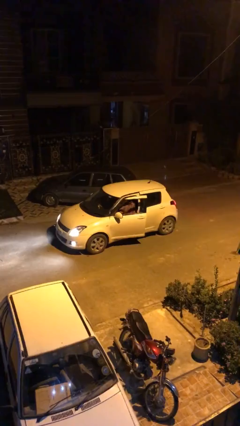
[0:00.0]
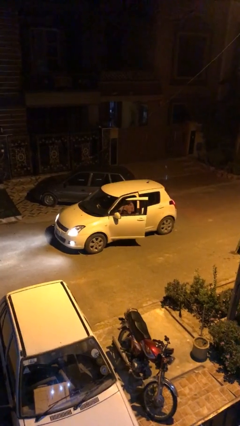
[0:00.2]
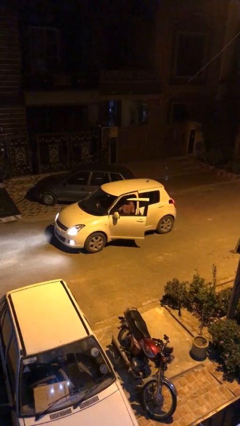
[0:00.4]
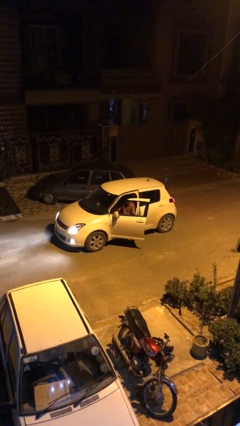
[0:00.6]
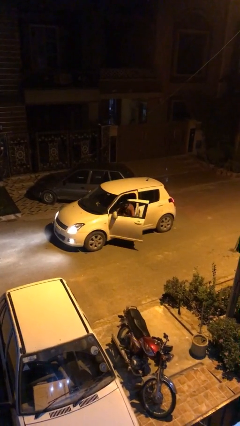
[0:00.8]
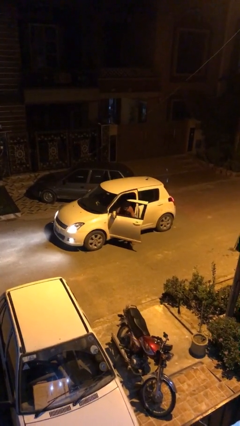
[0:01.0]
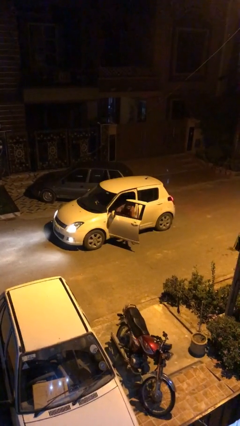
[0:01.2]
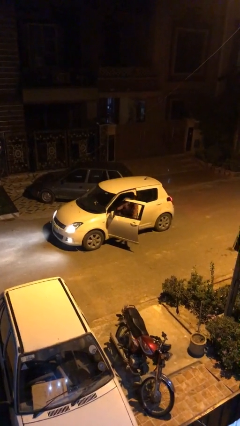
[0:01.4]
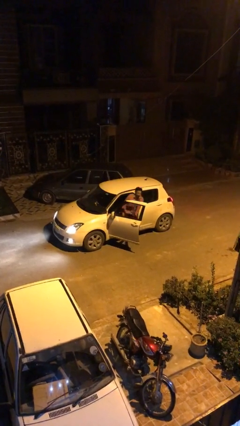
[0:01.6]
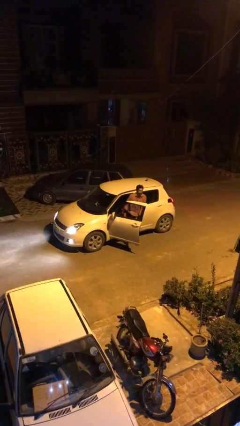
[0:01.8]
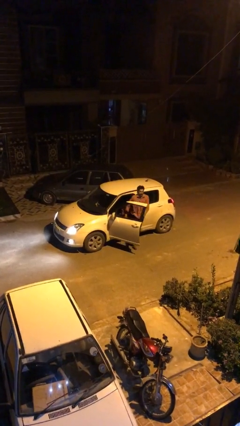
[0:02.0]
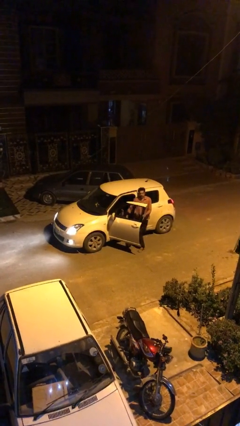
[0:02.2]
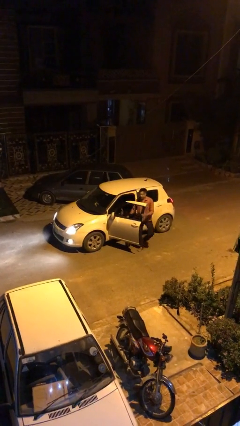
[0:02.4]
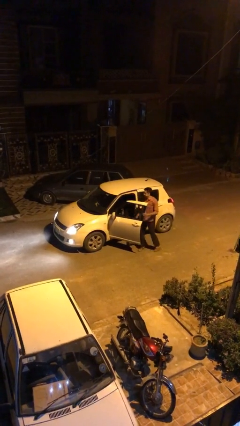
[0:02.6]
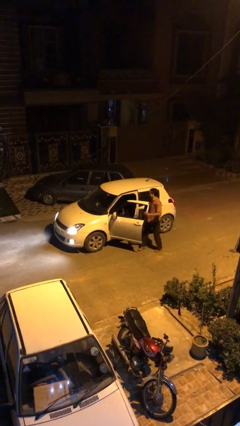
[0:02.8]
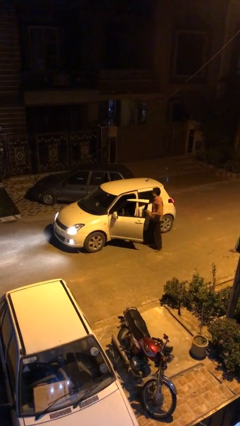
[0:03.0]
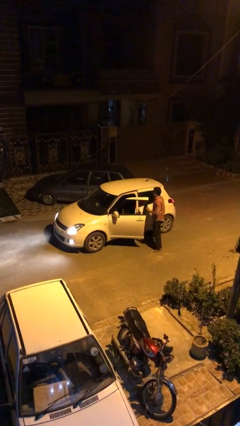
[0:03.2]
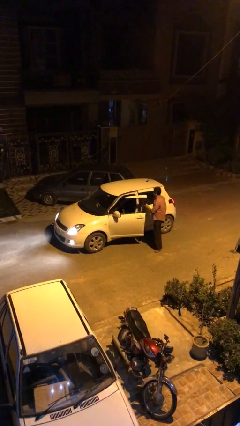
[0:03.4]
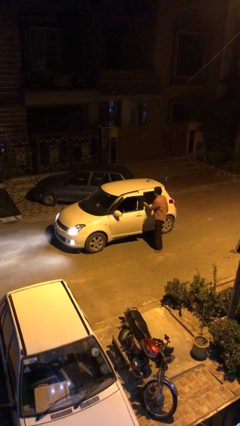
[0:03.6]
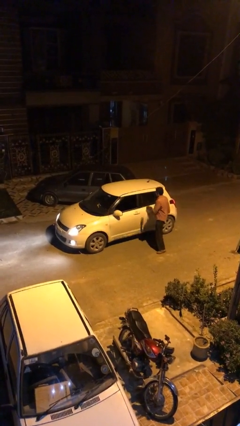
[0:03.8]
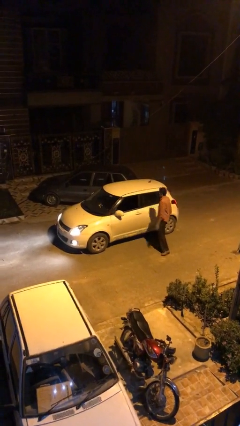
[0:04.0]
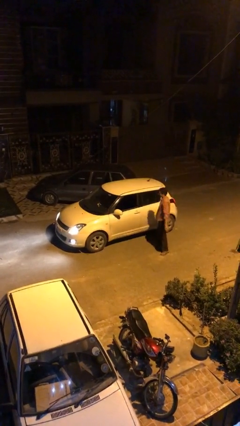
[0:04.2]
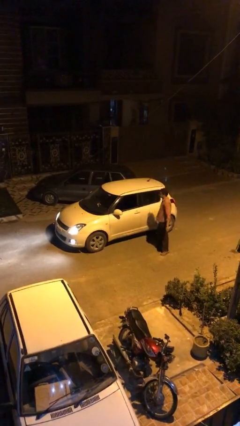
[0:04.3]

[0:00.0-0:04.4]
car drops off person

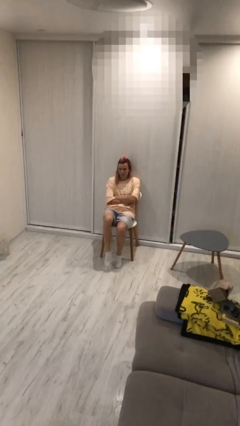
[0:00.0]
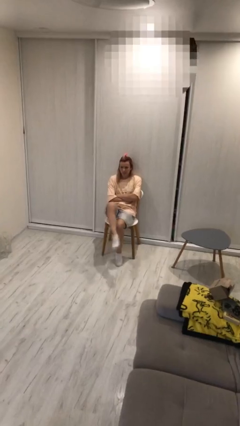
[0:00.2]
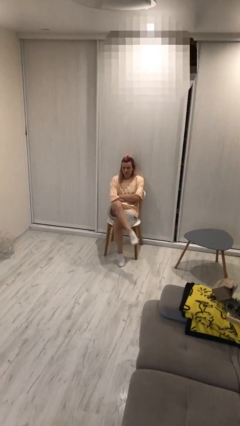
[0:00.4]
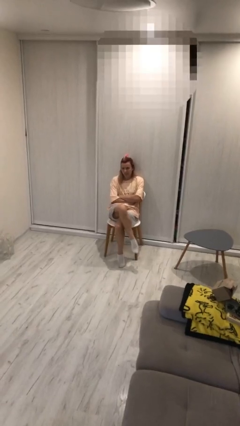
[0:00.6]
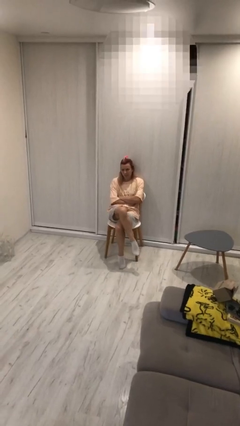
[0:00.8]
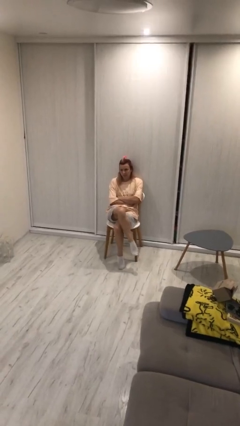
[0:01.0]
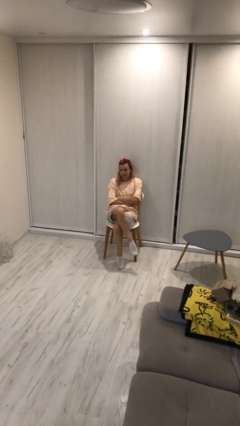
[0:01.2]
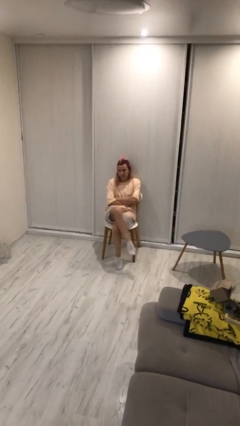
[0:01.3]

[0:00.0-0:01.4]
person crosses legs

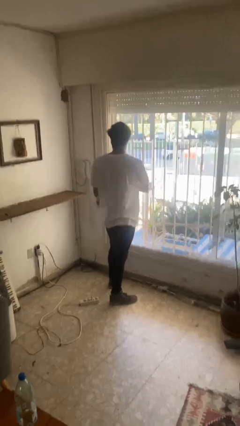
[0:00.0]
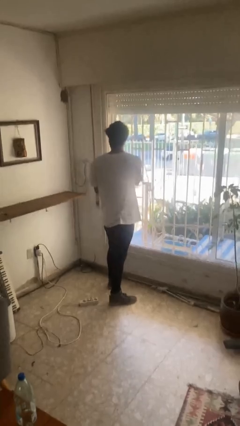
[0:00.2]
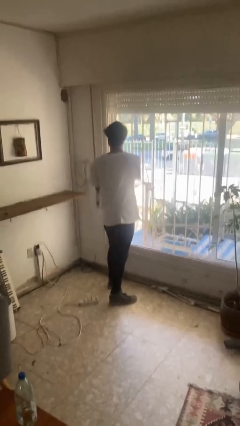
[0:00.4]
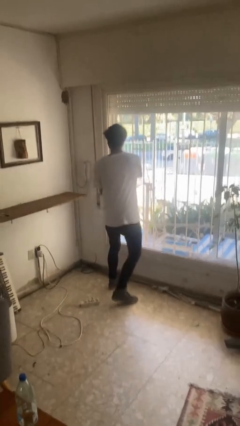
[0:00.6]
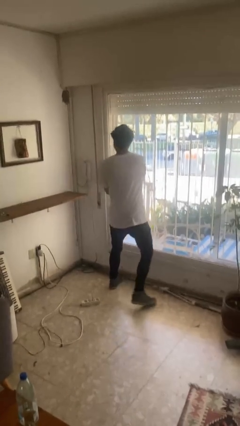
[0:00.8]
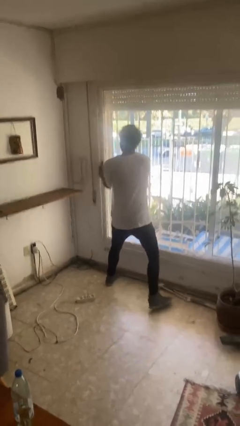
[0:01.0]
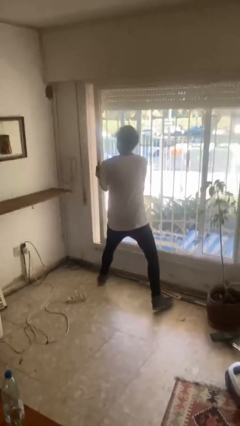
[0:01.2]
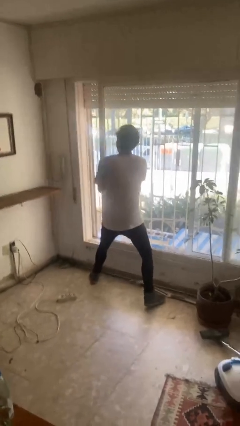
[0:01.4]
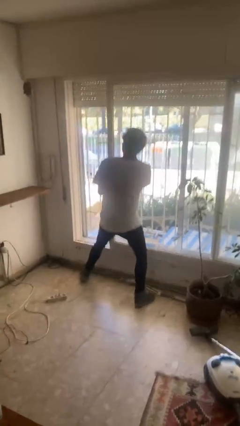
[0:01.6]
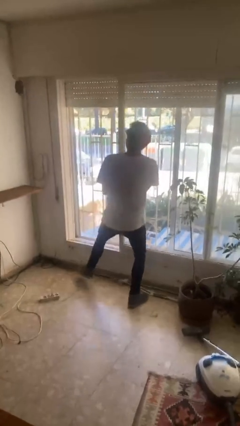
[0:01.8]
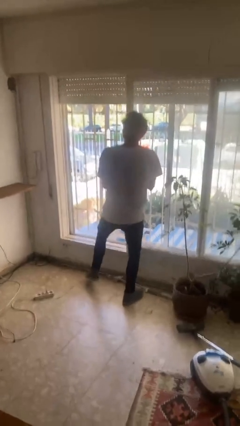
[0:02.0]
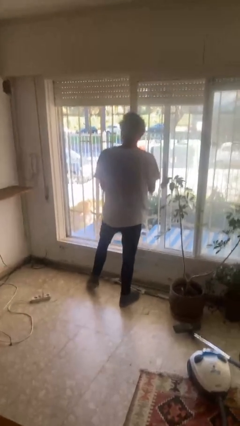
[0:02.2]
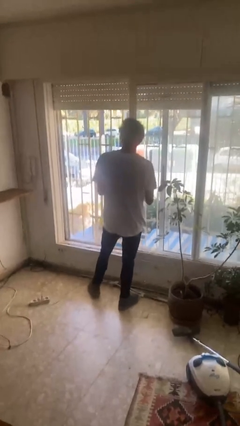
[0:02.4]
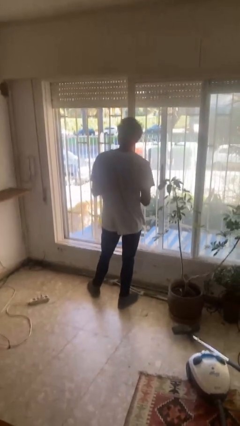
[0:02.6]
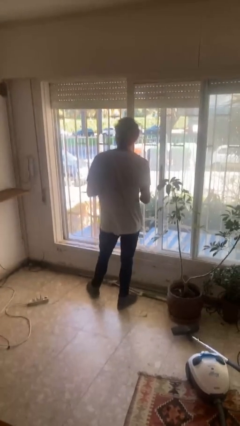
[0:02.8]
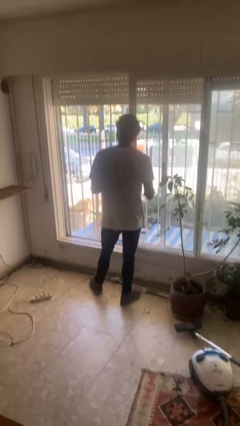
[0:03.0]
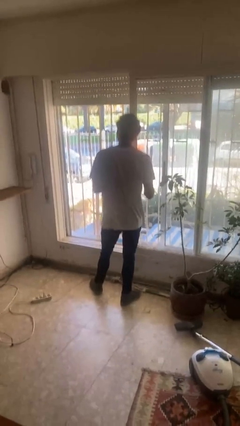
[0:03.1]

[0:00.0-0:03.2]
person opens sliding door

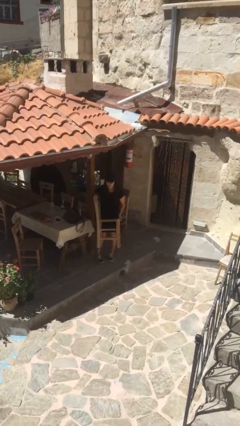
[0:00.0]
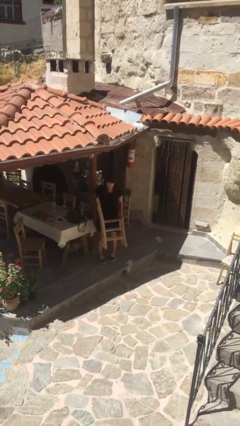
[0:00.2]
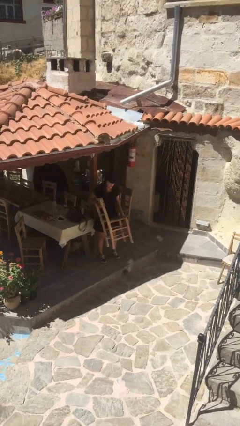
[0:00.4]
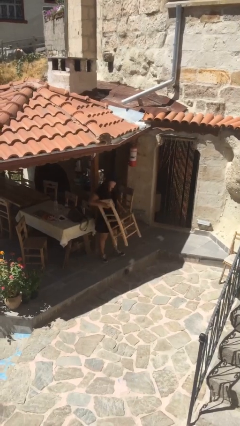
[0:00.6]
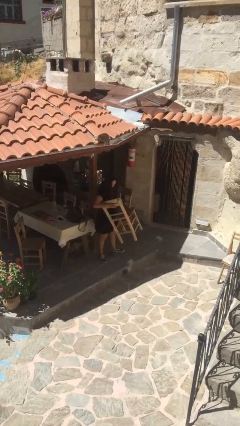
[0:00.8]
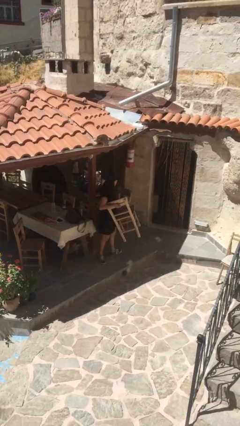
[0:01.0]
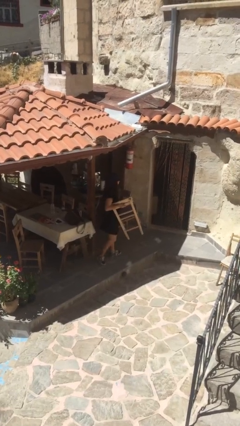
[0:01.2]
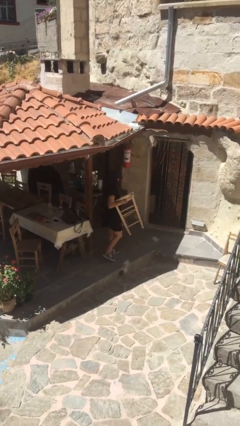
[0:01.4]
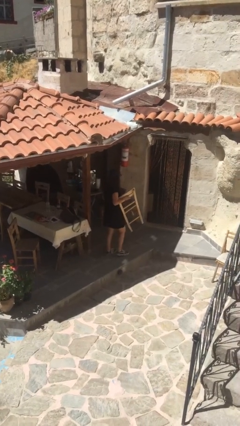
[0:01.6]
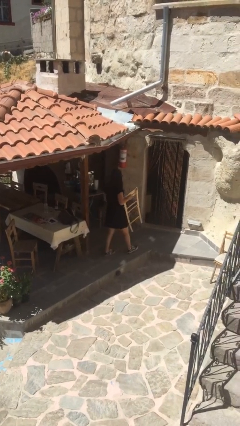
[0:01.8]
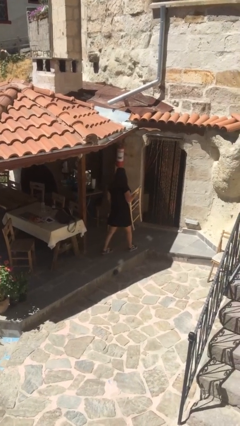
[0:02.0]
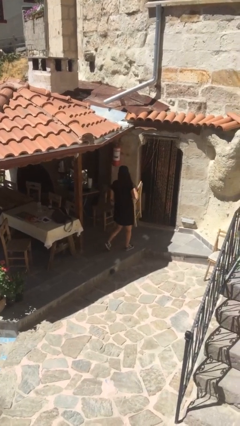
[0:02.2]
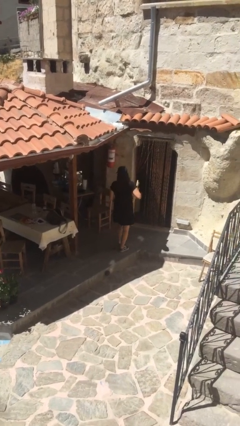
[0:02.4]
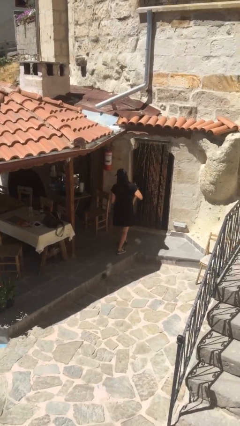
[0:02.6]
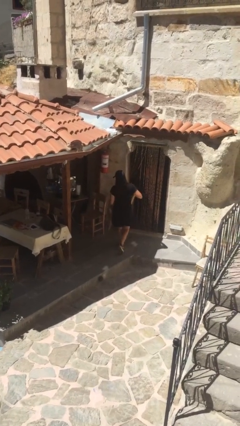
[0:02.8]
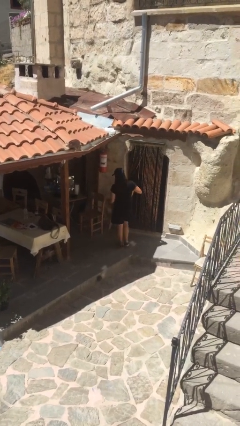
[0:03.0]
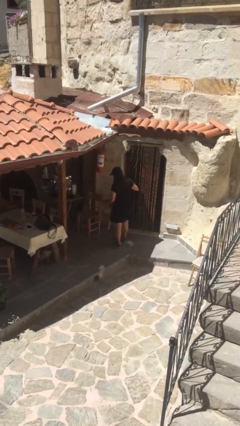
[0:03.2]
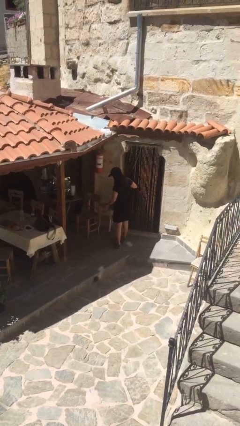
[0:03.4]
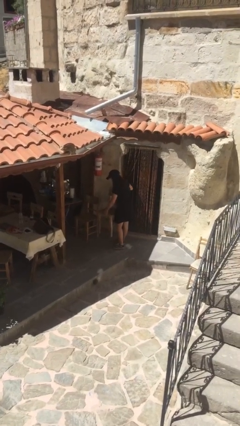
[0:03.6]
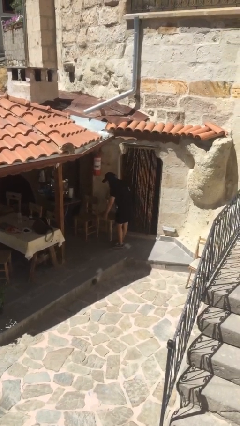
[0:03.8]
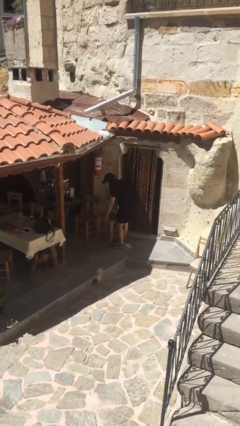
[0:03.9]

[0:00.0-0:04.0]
person carries heavy object

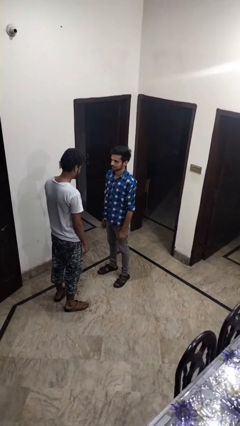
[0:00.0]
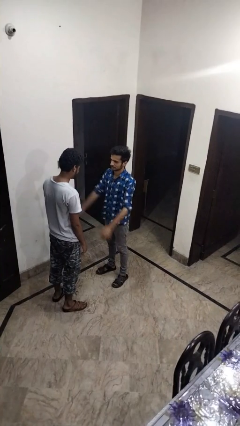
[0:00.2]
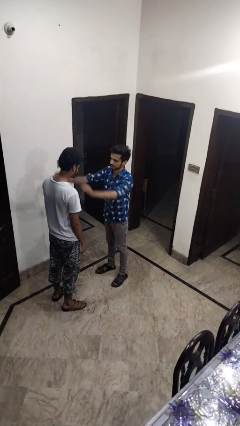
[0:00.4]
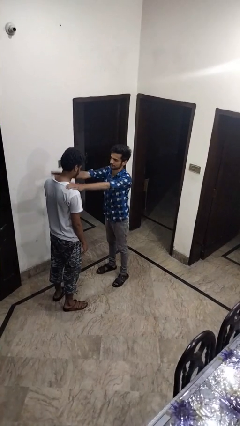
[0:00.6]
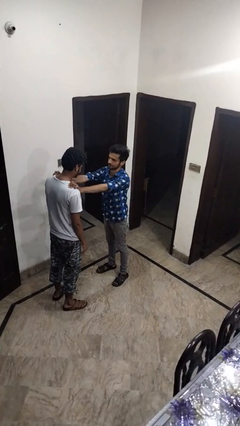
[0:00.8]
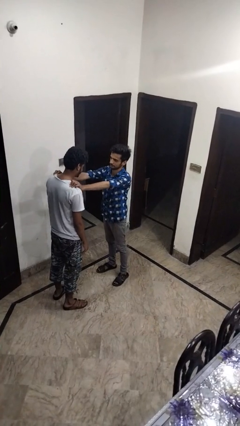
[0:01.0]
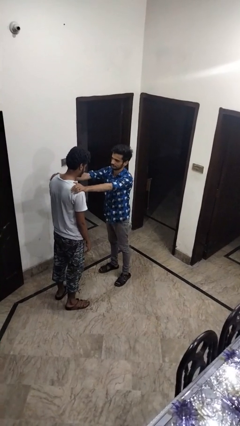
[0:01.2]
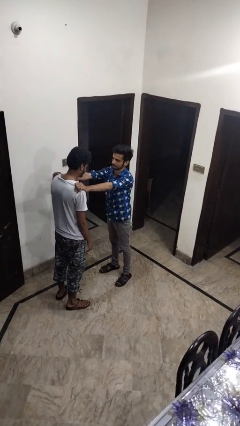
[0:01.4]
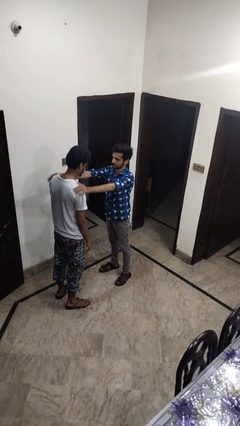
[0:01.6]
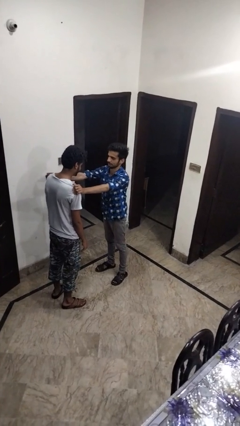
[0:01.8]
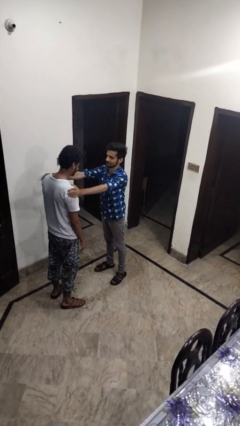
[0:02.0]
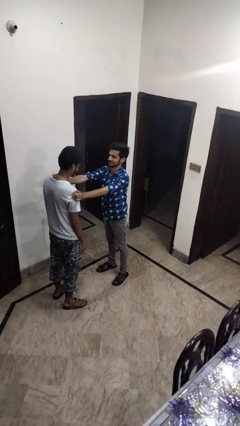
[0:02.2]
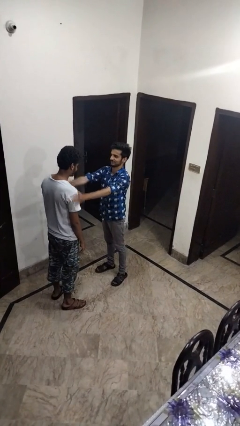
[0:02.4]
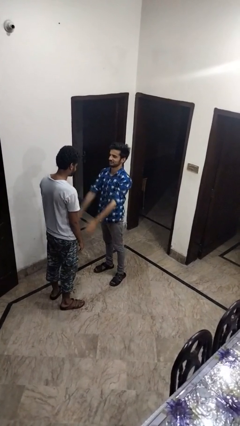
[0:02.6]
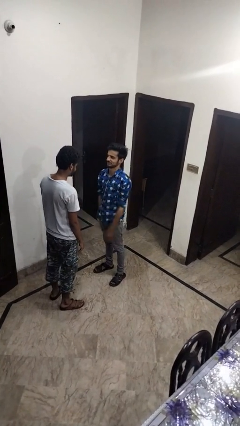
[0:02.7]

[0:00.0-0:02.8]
person pounds shoulders of person

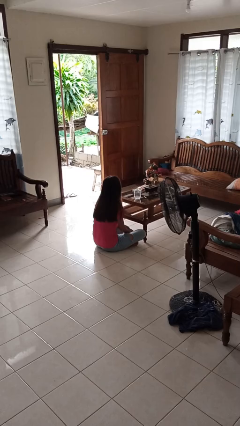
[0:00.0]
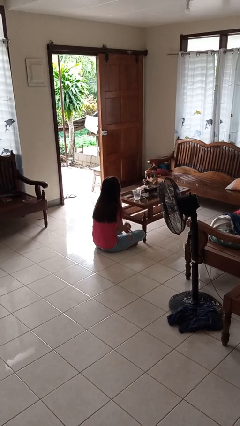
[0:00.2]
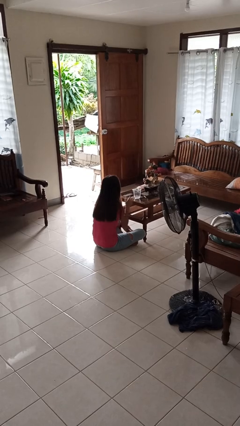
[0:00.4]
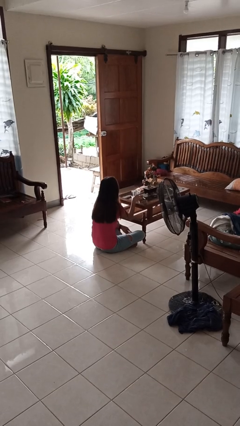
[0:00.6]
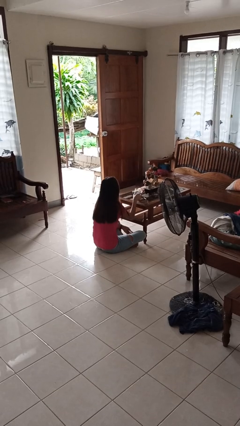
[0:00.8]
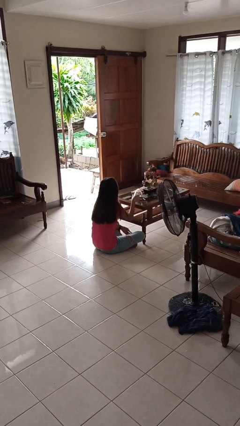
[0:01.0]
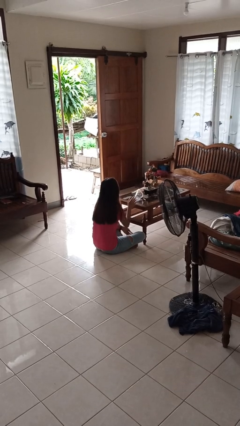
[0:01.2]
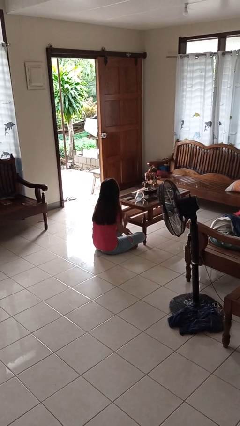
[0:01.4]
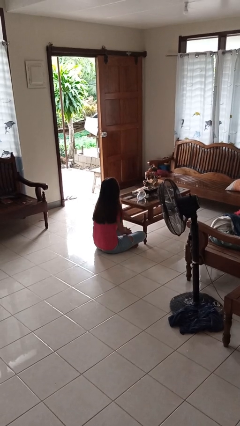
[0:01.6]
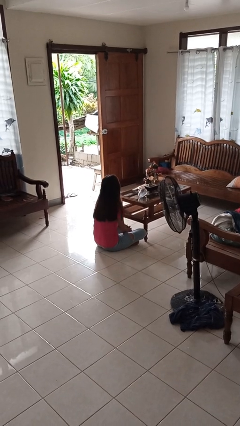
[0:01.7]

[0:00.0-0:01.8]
person knocks over glass

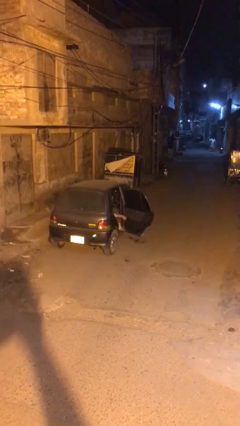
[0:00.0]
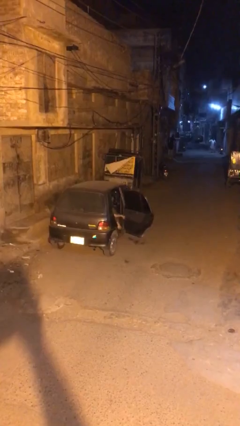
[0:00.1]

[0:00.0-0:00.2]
person closes car door
